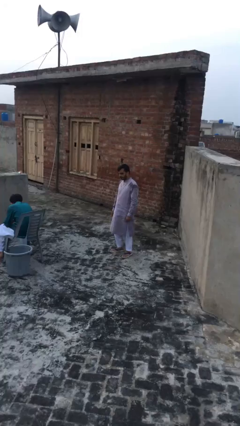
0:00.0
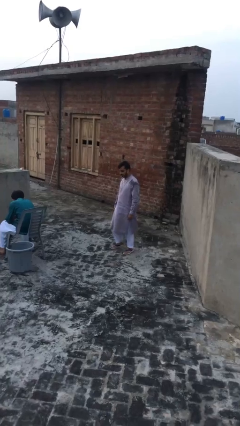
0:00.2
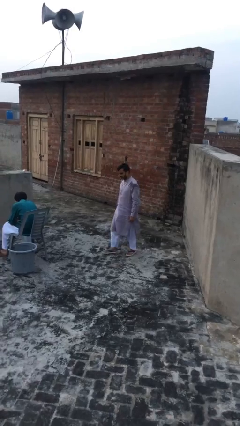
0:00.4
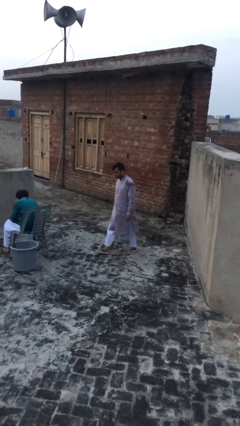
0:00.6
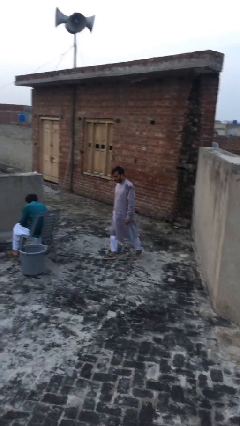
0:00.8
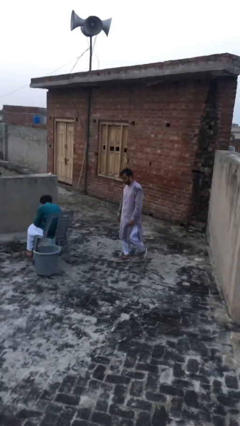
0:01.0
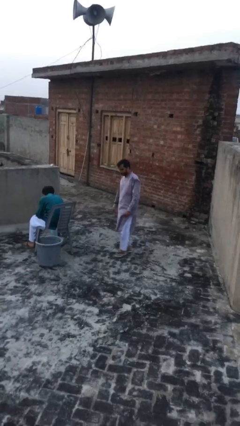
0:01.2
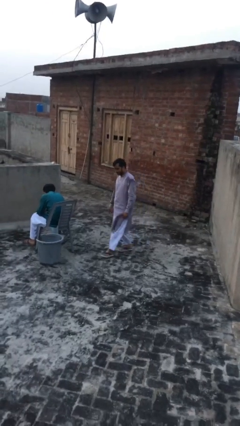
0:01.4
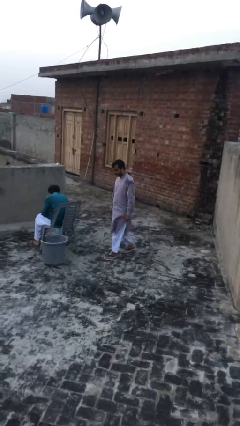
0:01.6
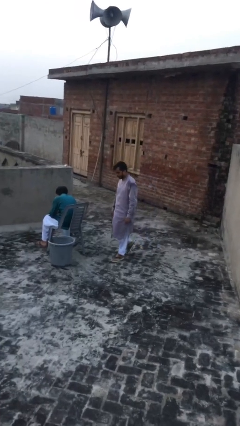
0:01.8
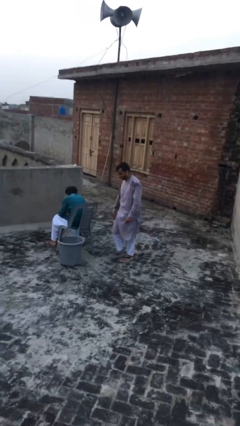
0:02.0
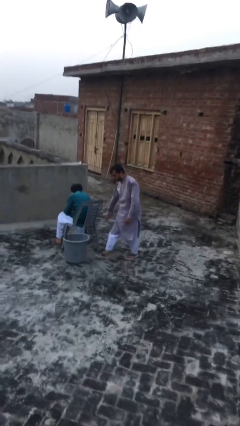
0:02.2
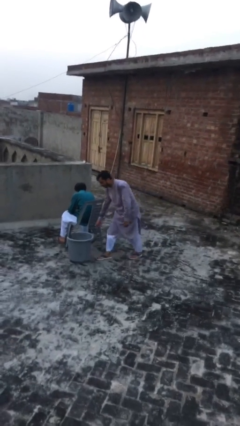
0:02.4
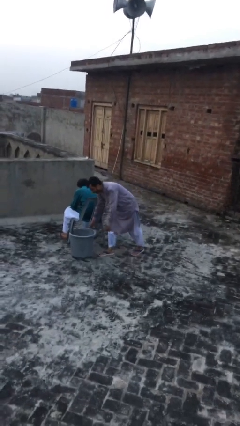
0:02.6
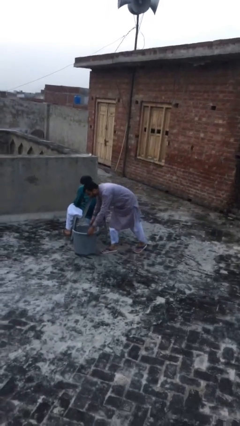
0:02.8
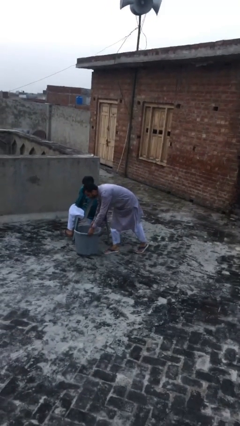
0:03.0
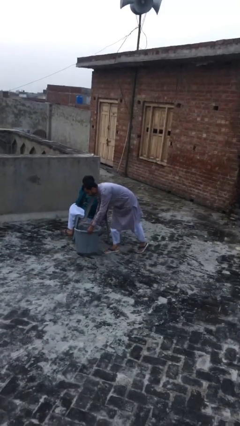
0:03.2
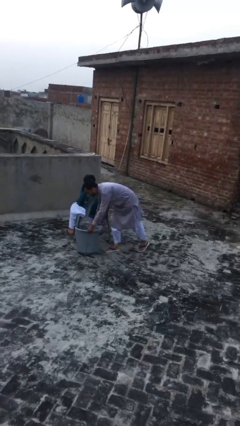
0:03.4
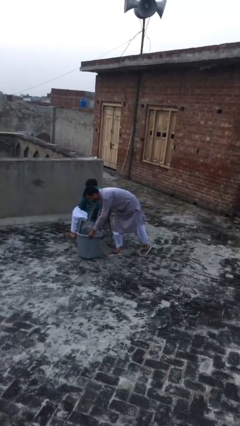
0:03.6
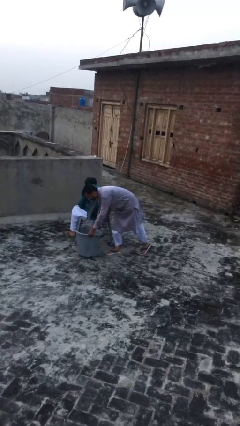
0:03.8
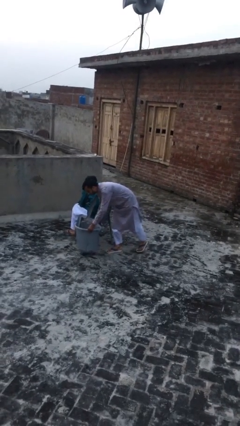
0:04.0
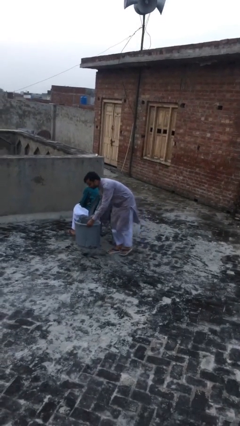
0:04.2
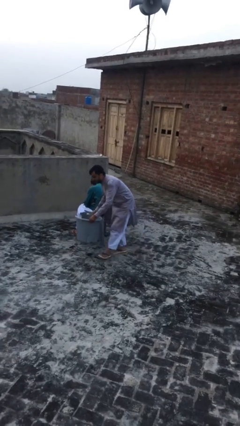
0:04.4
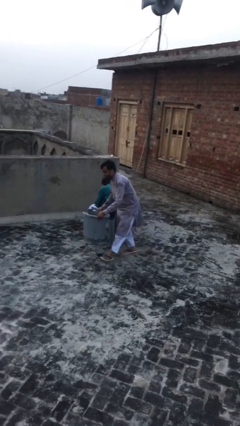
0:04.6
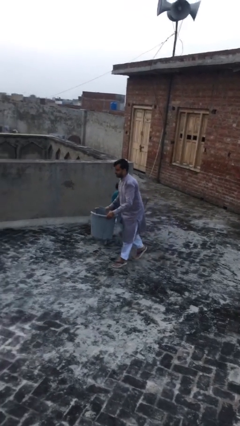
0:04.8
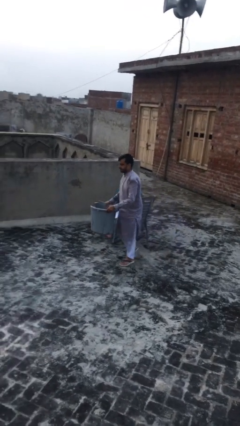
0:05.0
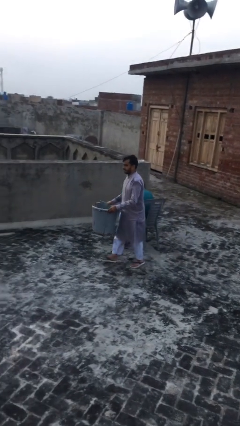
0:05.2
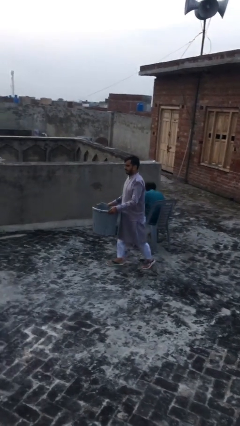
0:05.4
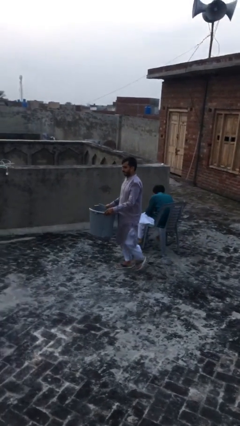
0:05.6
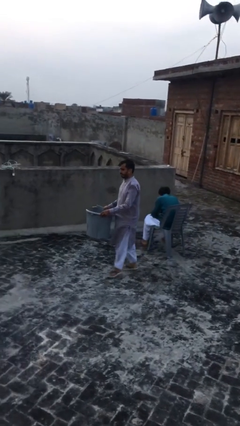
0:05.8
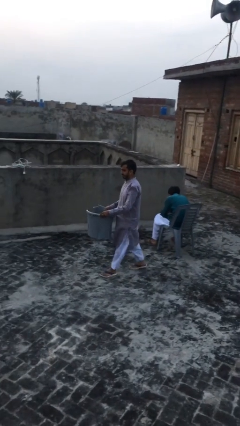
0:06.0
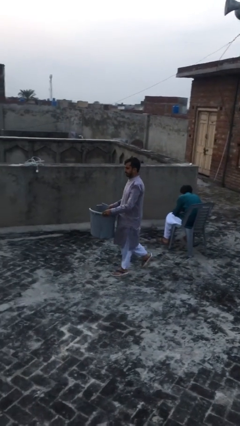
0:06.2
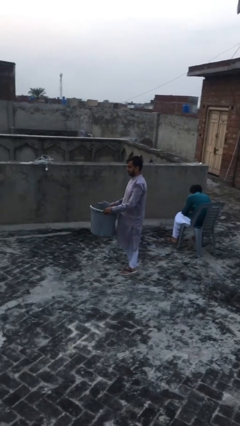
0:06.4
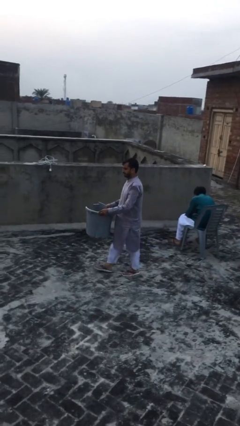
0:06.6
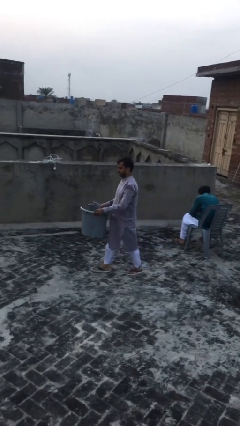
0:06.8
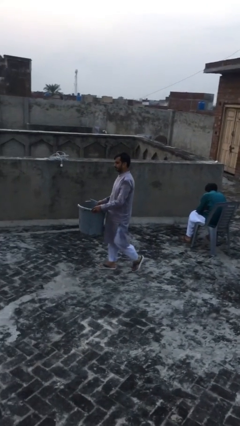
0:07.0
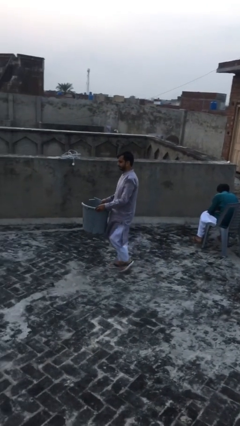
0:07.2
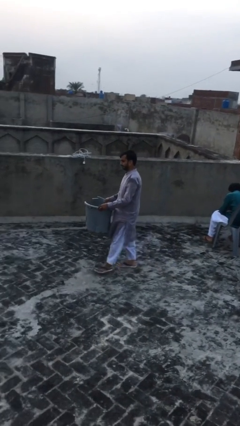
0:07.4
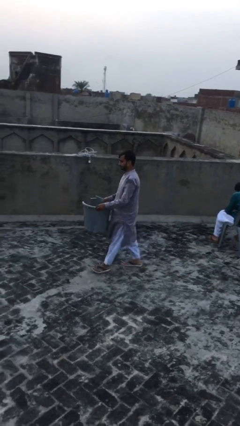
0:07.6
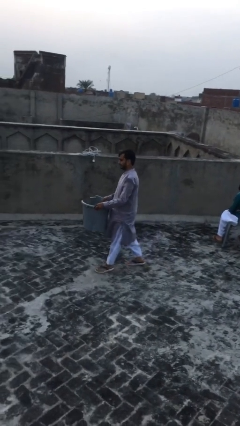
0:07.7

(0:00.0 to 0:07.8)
person steals object from person

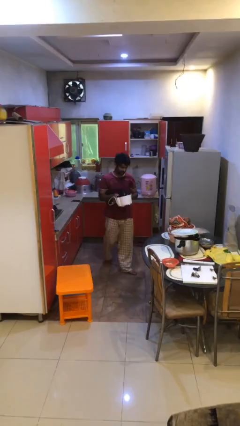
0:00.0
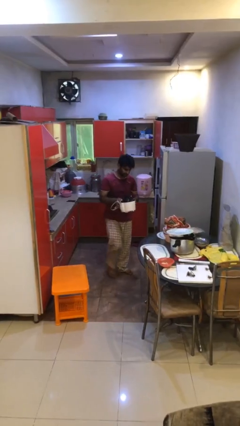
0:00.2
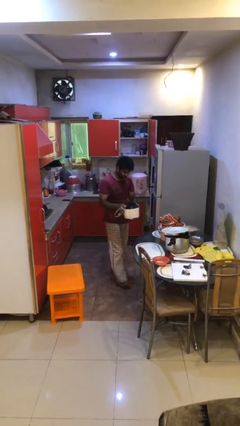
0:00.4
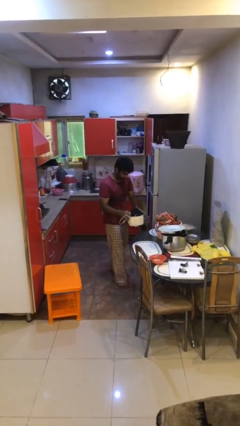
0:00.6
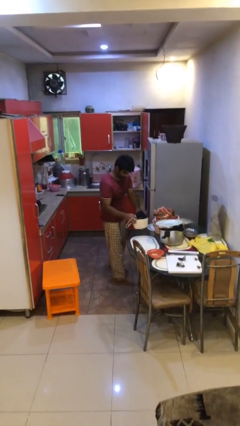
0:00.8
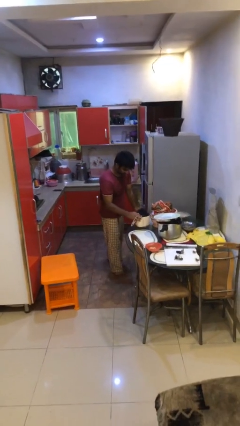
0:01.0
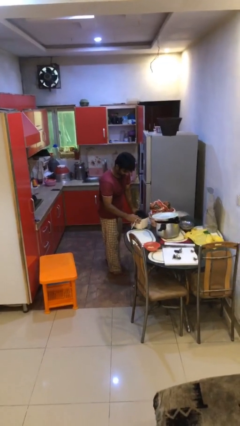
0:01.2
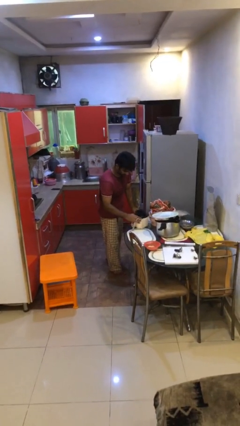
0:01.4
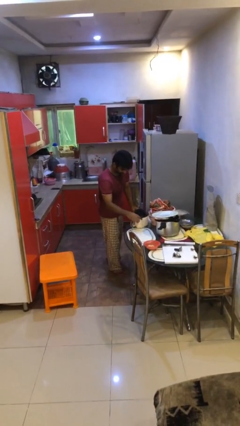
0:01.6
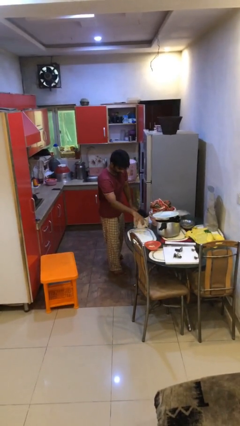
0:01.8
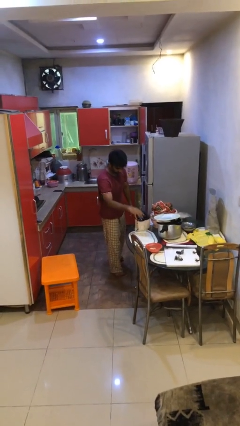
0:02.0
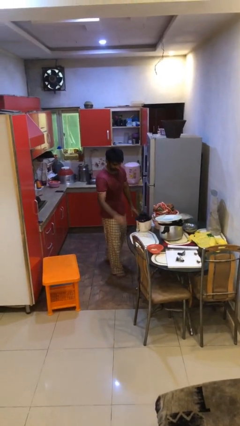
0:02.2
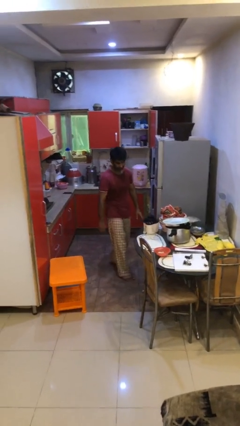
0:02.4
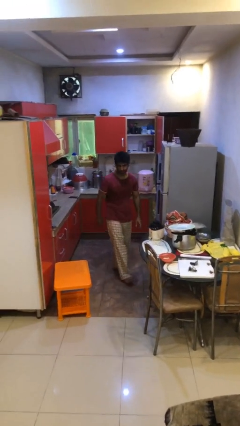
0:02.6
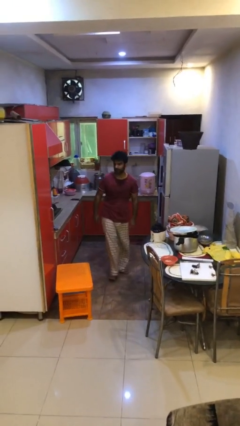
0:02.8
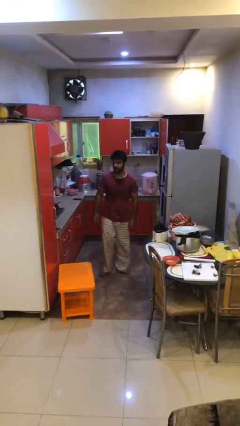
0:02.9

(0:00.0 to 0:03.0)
person puts down object on table

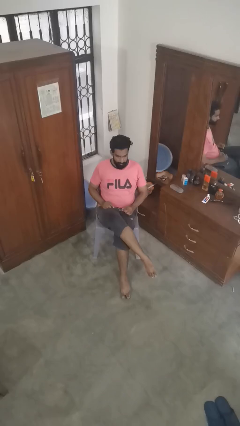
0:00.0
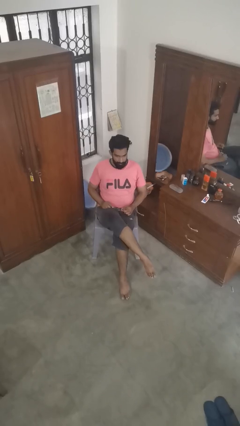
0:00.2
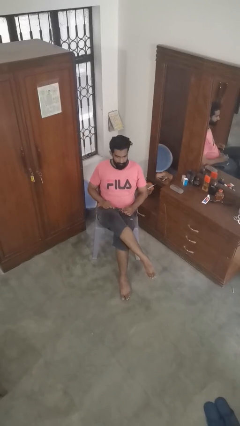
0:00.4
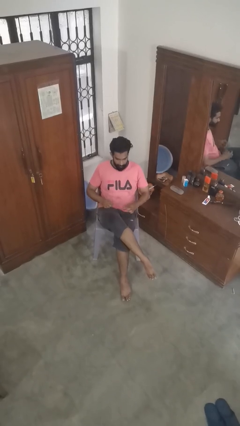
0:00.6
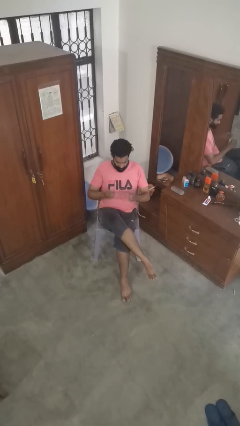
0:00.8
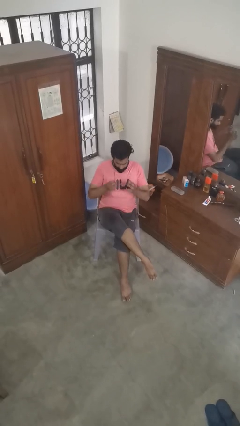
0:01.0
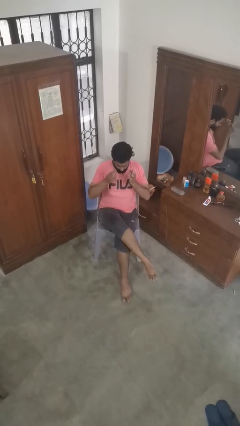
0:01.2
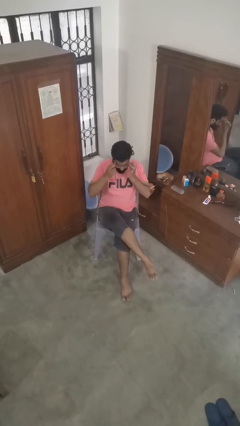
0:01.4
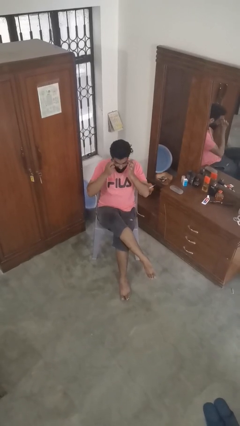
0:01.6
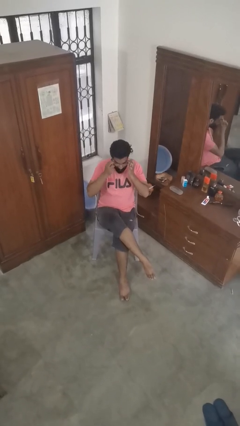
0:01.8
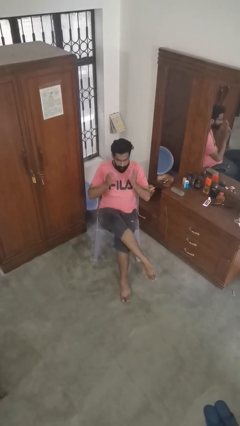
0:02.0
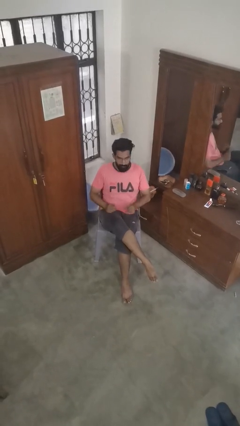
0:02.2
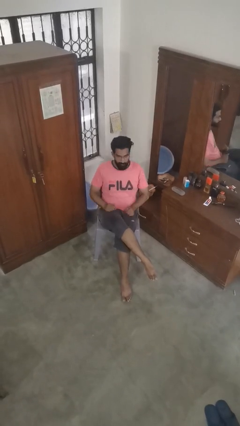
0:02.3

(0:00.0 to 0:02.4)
person puts on glasses

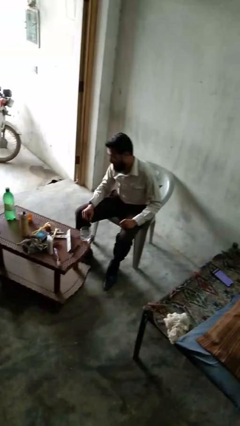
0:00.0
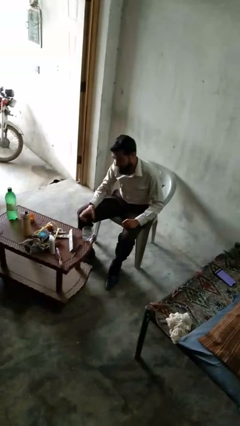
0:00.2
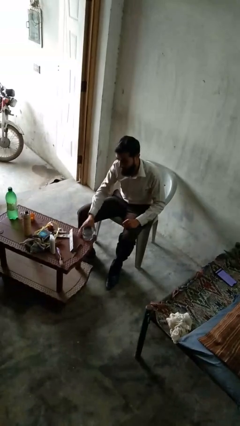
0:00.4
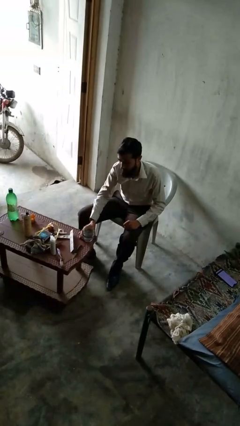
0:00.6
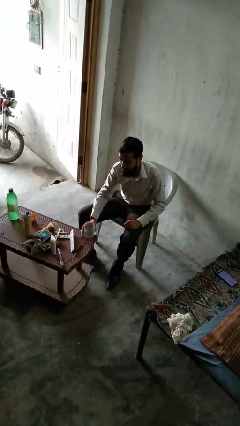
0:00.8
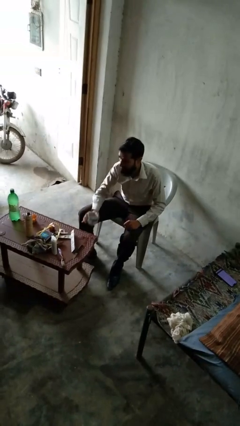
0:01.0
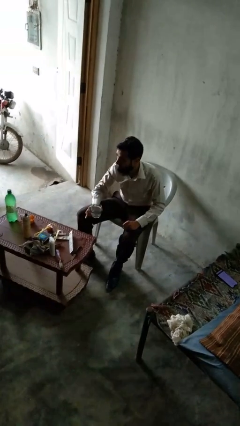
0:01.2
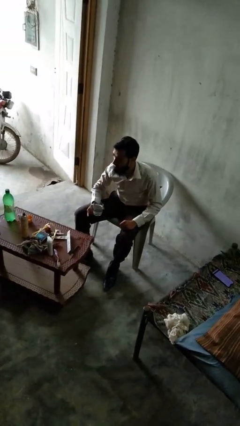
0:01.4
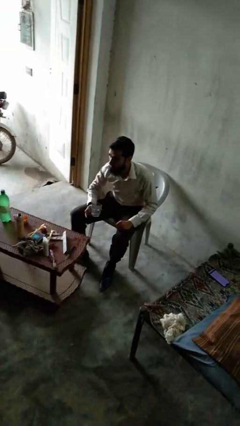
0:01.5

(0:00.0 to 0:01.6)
person picks up object from table

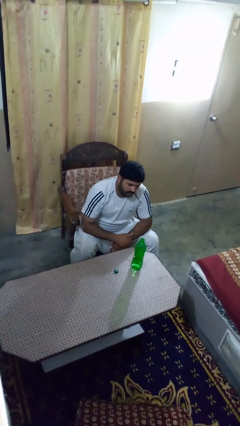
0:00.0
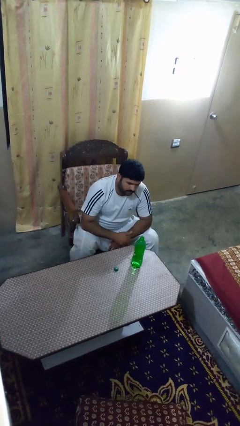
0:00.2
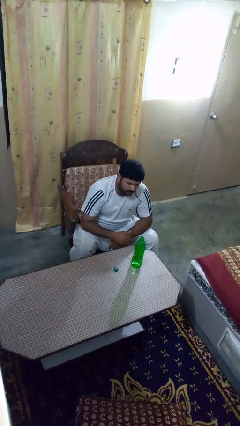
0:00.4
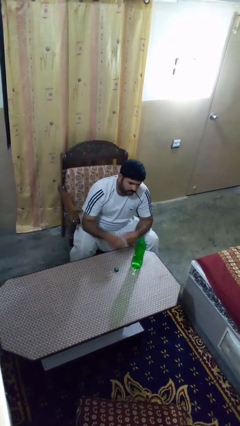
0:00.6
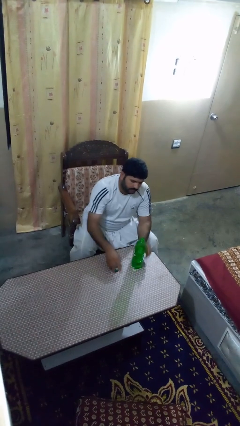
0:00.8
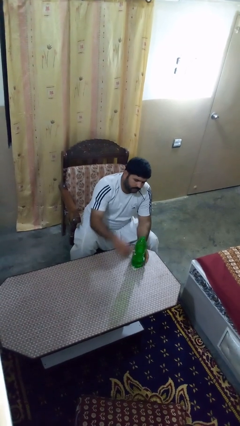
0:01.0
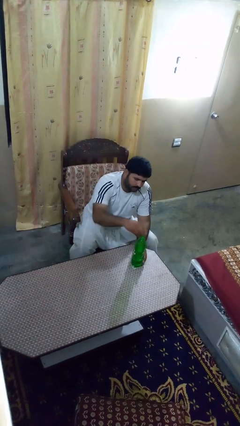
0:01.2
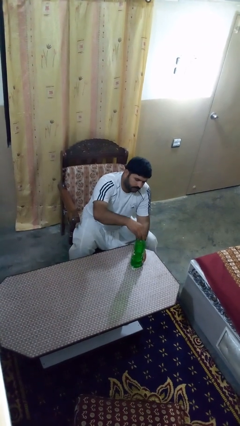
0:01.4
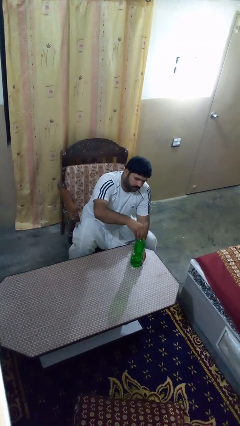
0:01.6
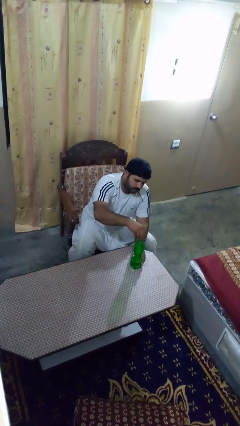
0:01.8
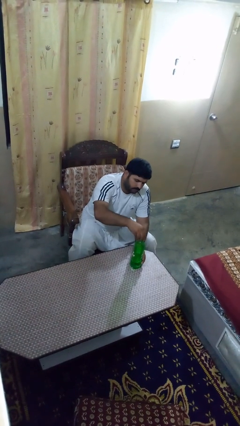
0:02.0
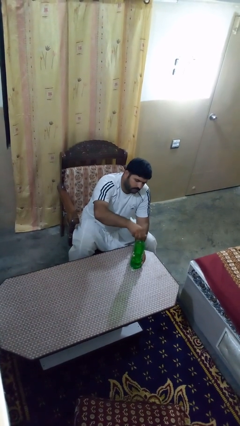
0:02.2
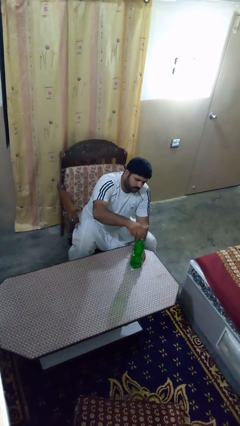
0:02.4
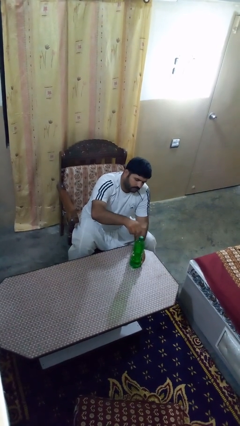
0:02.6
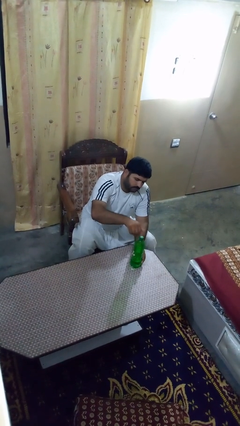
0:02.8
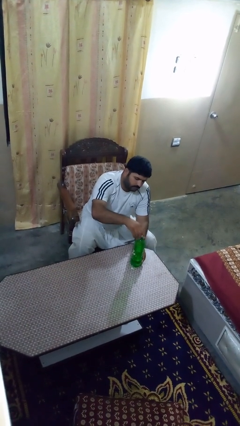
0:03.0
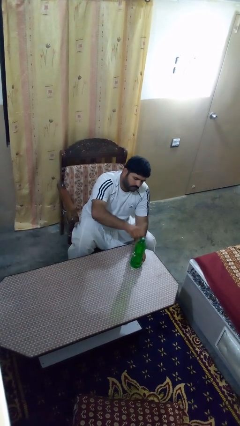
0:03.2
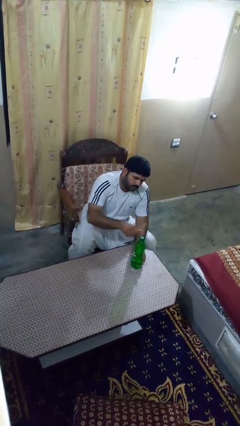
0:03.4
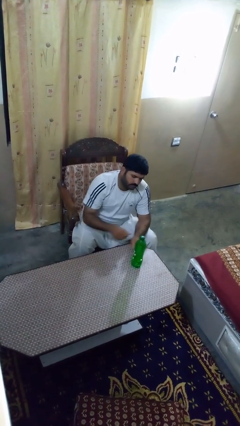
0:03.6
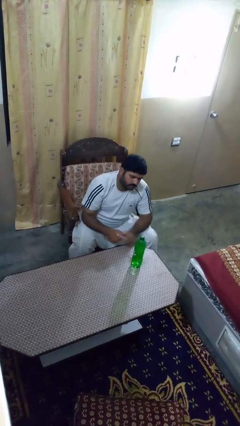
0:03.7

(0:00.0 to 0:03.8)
person screws lid to bottle
